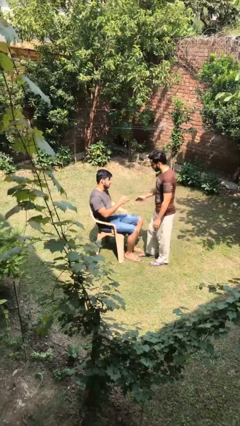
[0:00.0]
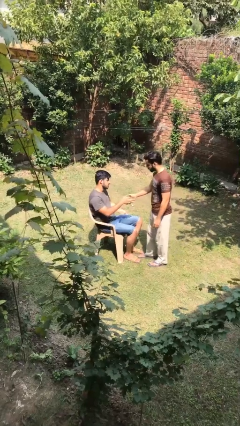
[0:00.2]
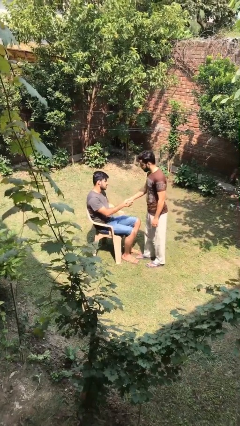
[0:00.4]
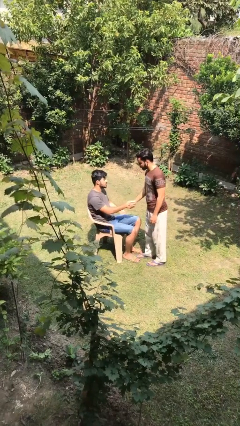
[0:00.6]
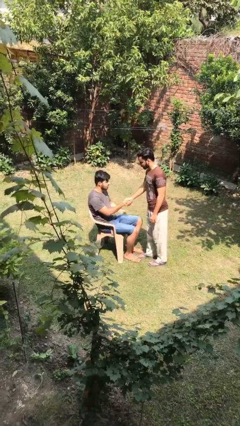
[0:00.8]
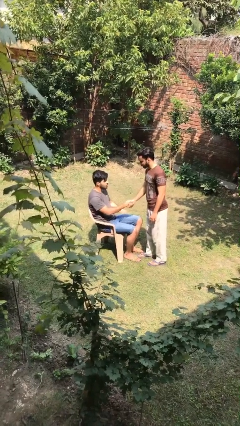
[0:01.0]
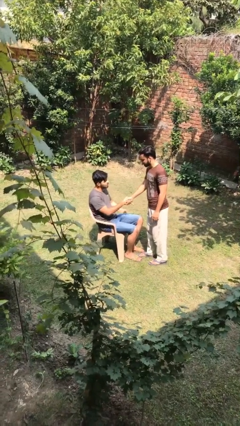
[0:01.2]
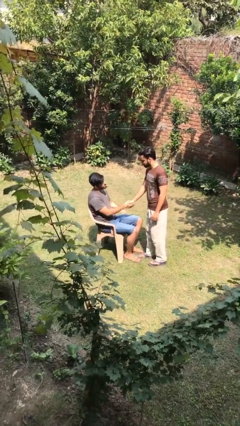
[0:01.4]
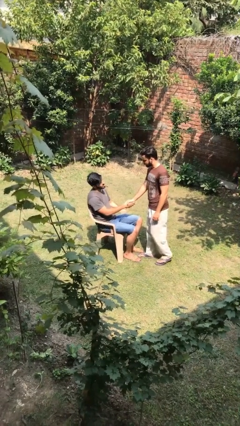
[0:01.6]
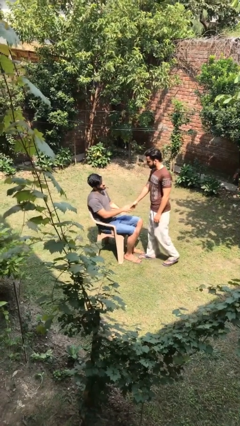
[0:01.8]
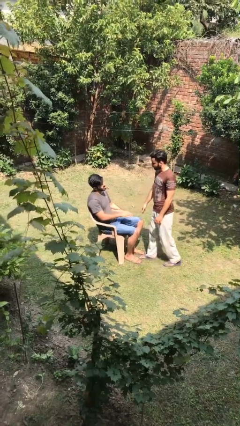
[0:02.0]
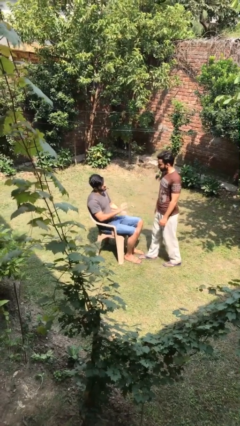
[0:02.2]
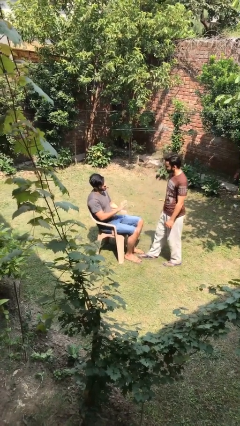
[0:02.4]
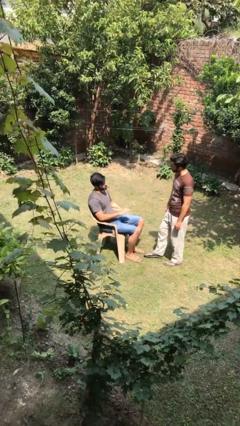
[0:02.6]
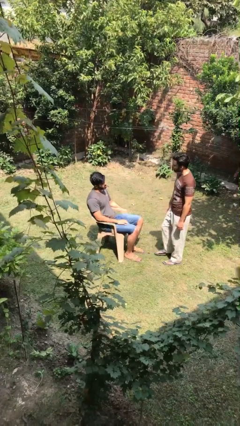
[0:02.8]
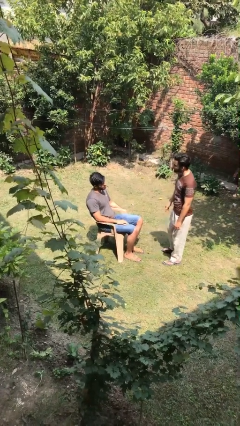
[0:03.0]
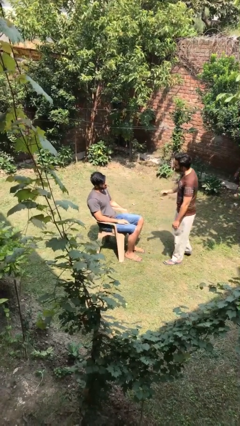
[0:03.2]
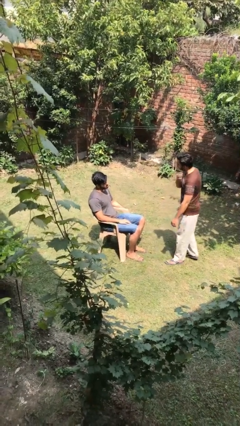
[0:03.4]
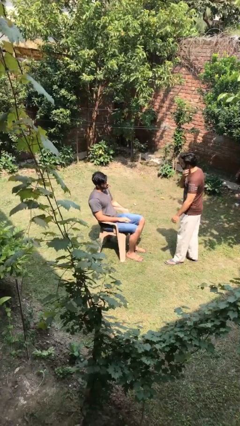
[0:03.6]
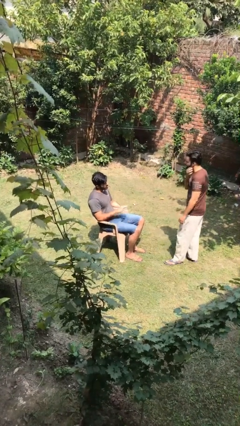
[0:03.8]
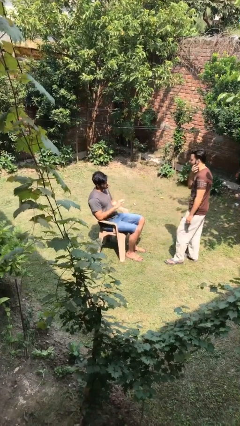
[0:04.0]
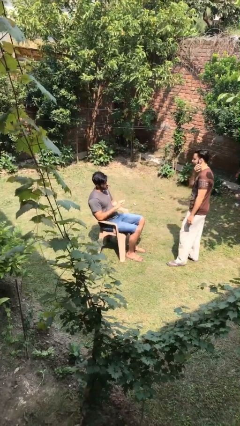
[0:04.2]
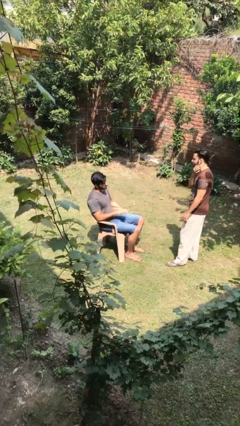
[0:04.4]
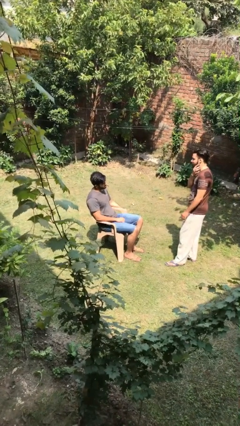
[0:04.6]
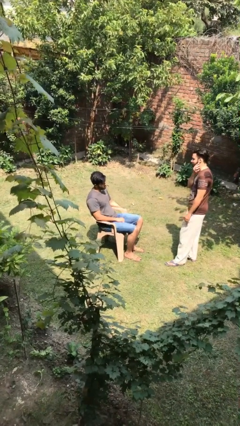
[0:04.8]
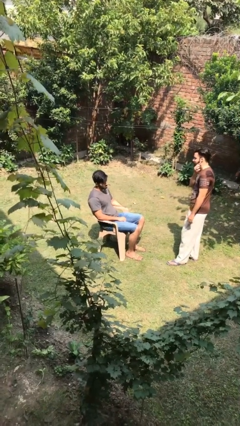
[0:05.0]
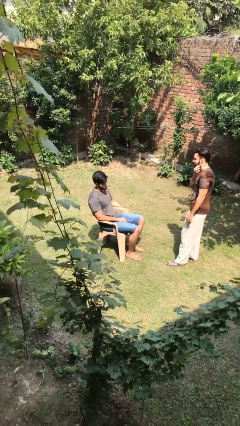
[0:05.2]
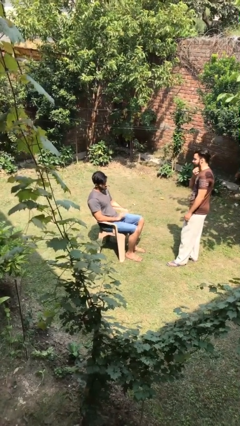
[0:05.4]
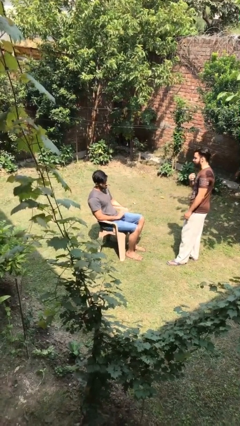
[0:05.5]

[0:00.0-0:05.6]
person shakes hand

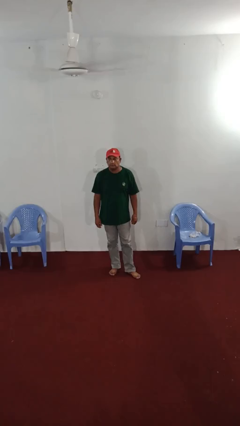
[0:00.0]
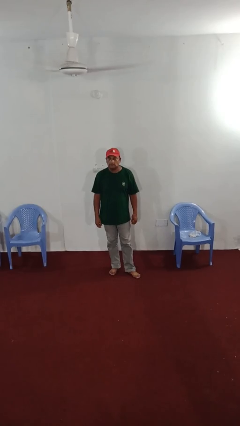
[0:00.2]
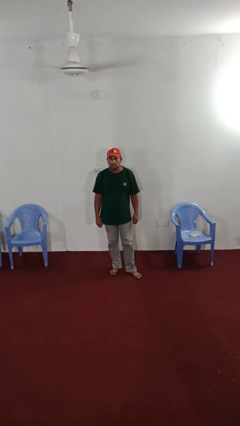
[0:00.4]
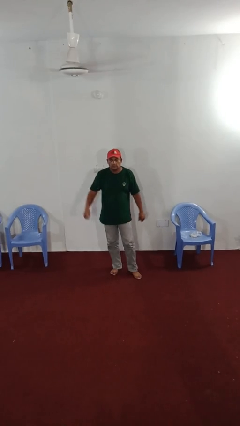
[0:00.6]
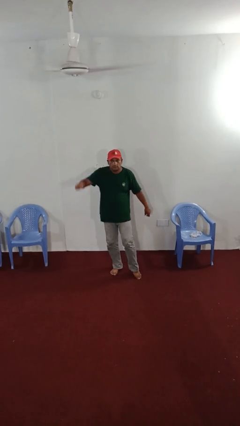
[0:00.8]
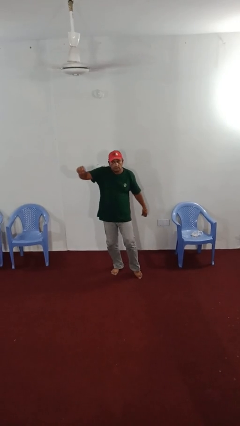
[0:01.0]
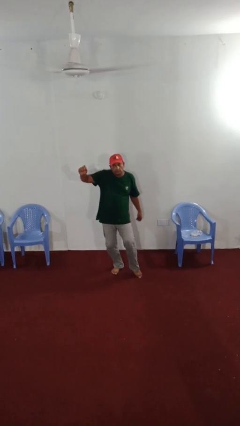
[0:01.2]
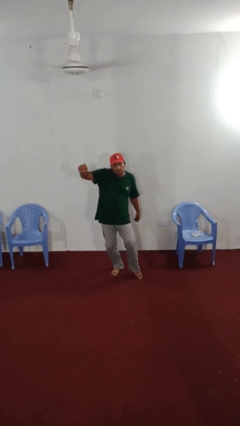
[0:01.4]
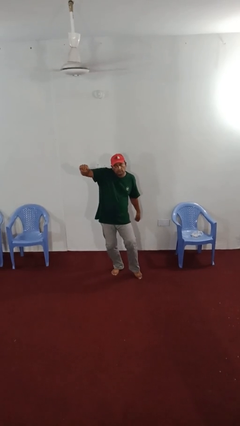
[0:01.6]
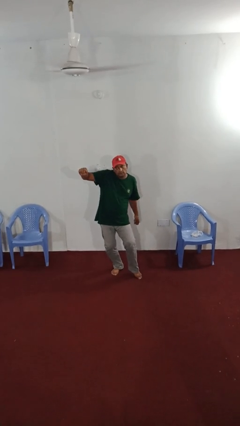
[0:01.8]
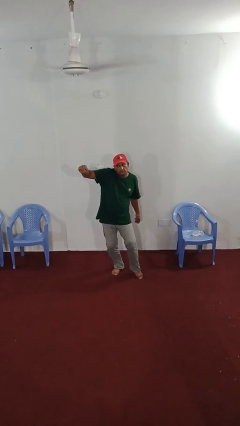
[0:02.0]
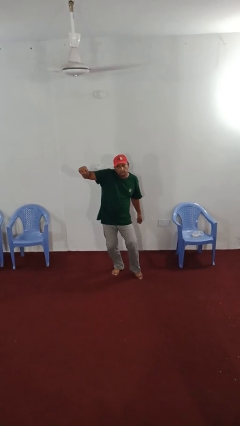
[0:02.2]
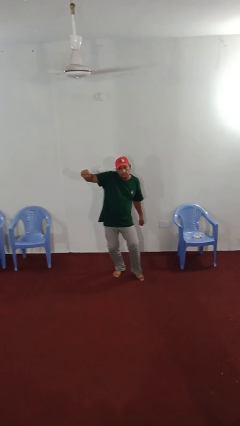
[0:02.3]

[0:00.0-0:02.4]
person dances in place

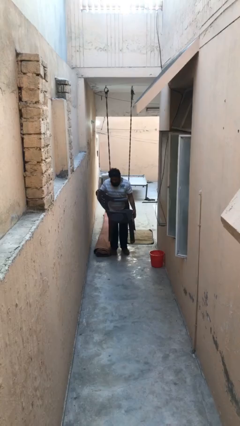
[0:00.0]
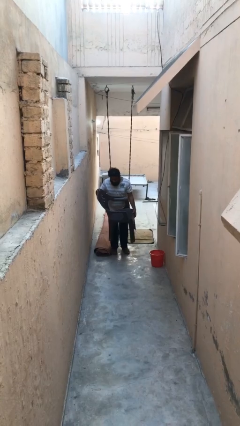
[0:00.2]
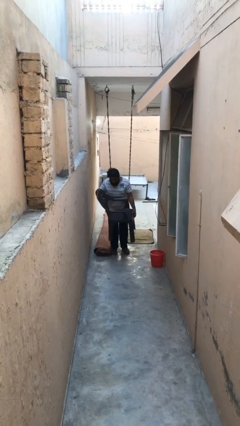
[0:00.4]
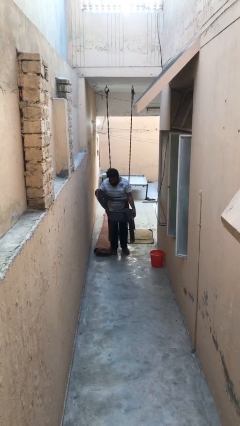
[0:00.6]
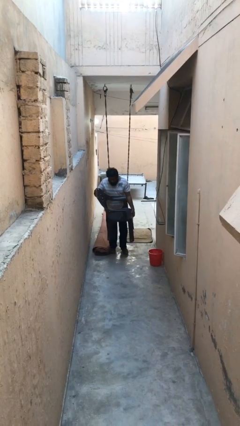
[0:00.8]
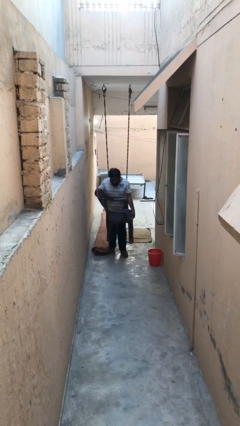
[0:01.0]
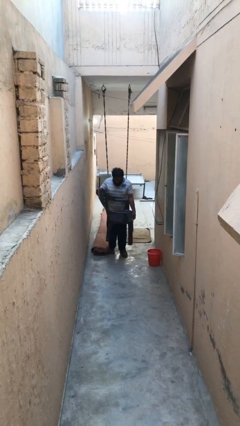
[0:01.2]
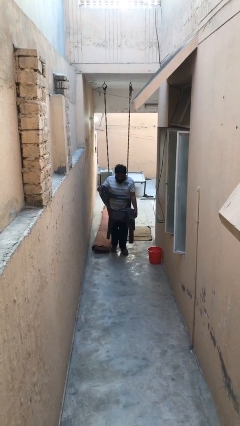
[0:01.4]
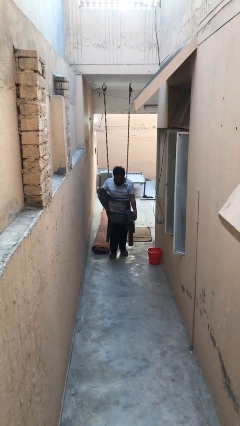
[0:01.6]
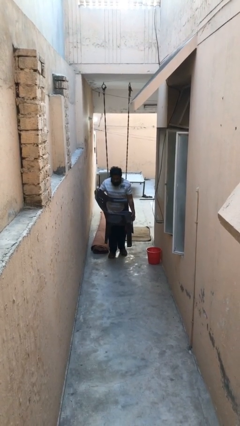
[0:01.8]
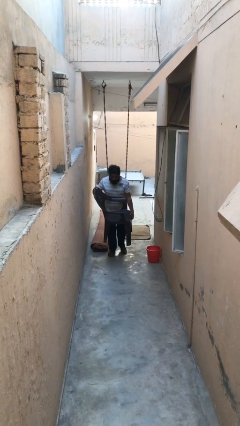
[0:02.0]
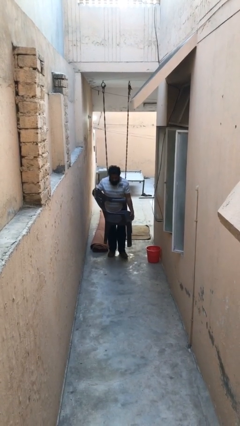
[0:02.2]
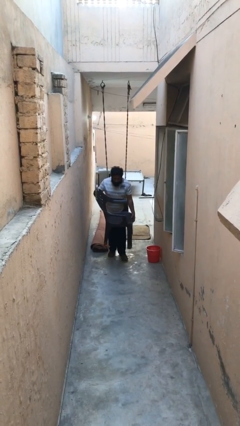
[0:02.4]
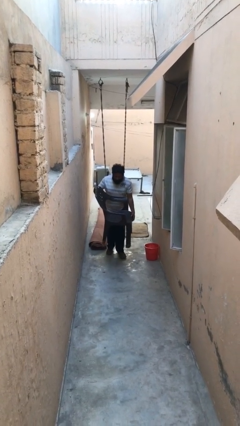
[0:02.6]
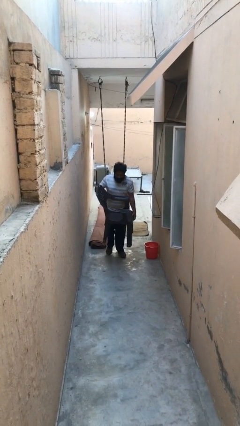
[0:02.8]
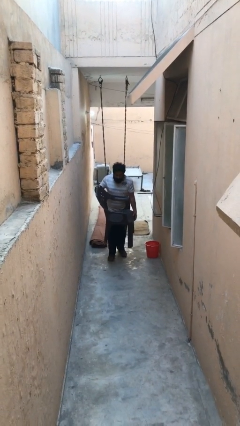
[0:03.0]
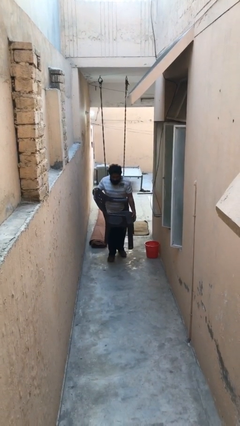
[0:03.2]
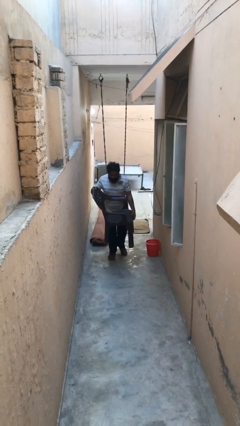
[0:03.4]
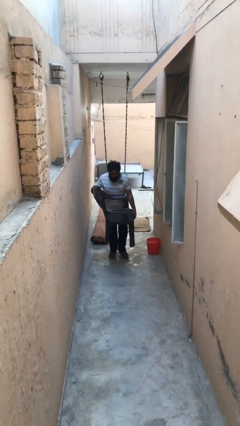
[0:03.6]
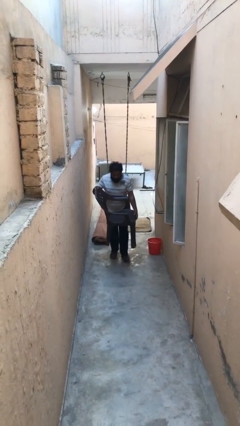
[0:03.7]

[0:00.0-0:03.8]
person carries heavy object

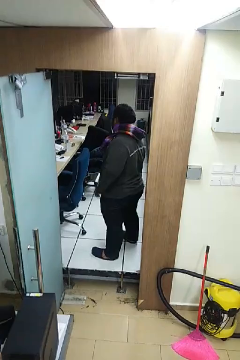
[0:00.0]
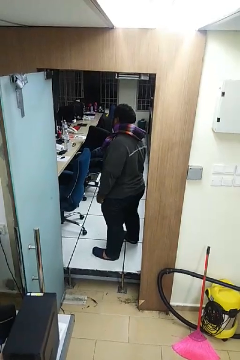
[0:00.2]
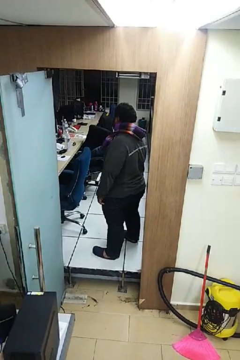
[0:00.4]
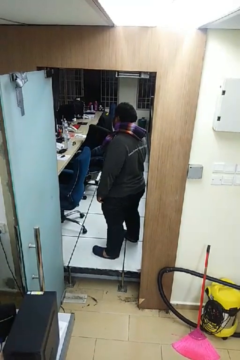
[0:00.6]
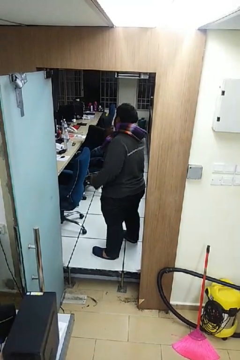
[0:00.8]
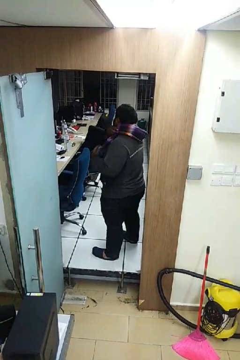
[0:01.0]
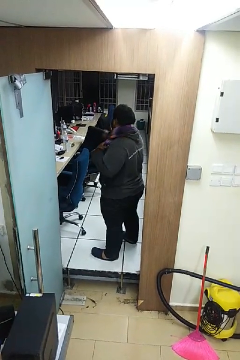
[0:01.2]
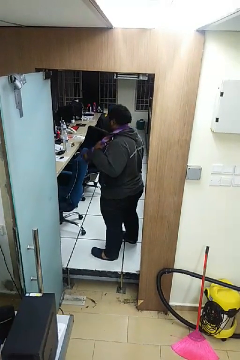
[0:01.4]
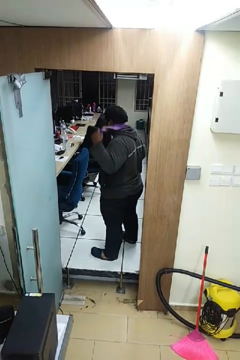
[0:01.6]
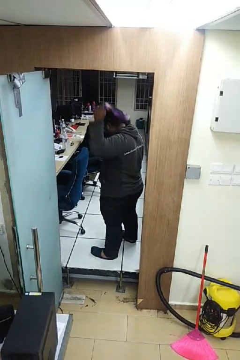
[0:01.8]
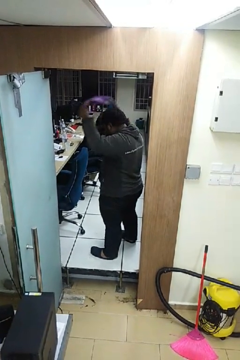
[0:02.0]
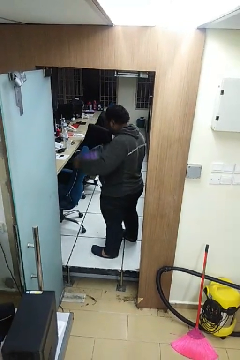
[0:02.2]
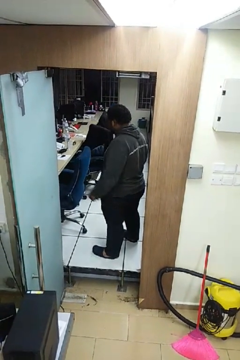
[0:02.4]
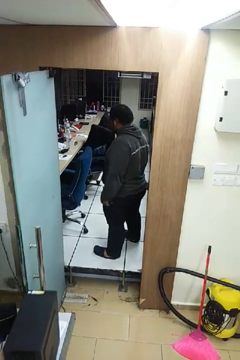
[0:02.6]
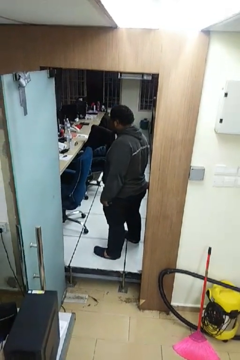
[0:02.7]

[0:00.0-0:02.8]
person takes off scarf

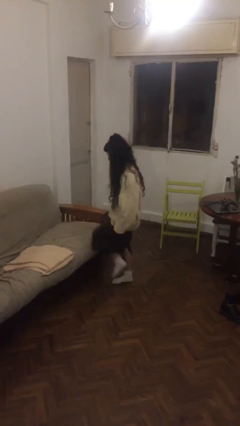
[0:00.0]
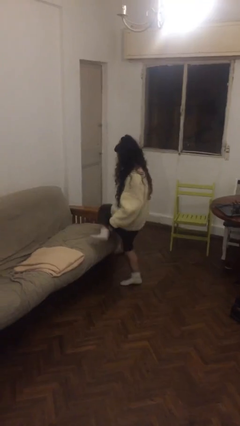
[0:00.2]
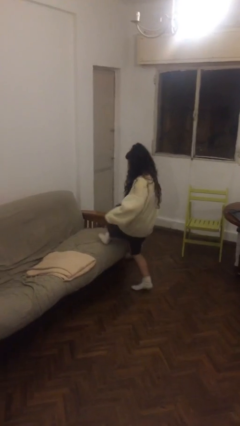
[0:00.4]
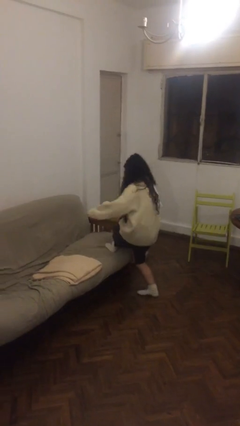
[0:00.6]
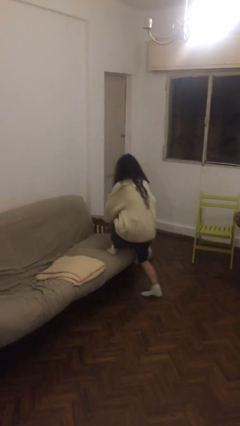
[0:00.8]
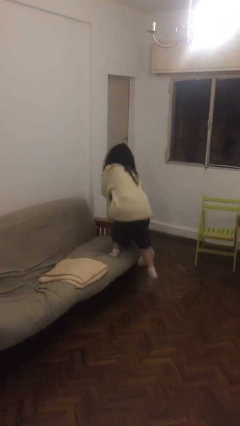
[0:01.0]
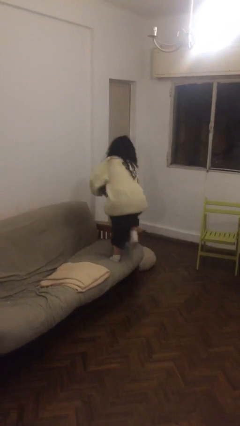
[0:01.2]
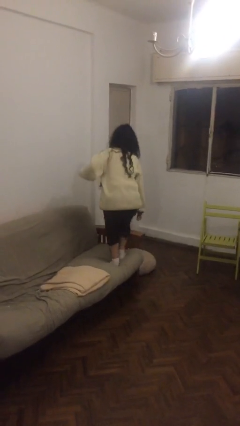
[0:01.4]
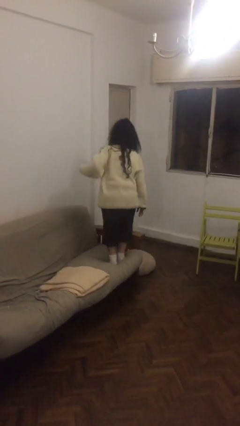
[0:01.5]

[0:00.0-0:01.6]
person climbs on couch

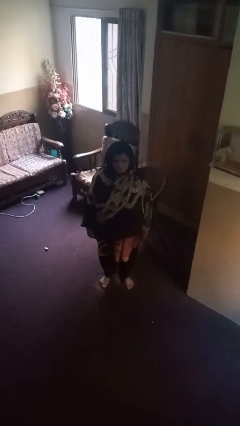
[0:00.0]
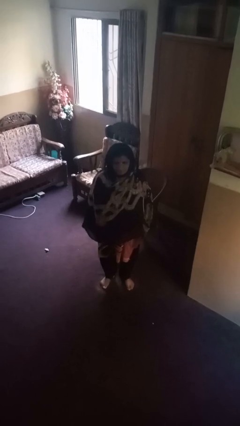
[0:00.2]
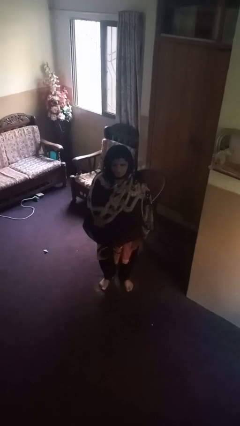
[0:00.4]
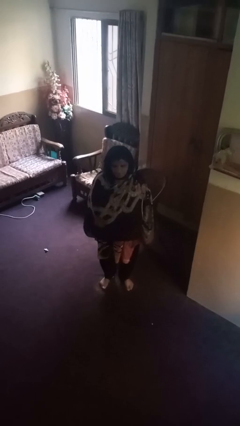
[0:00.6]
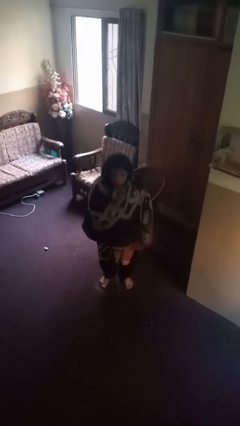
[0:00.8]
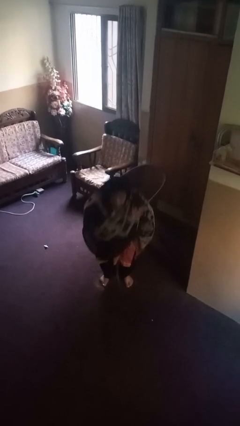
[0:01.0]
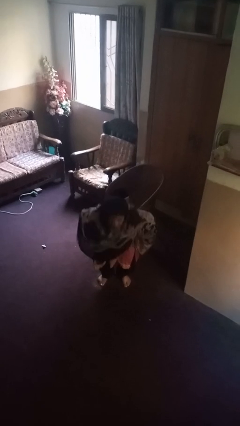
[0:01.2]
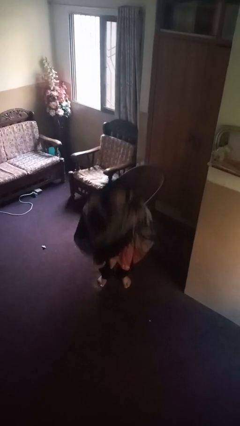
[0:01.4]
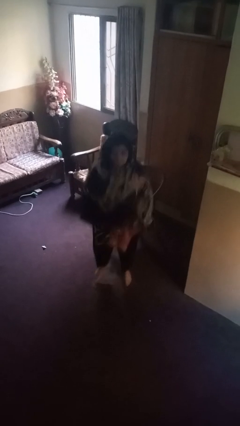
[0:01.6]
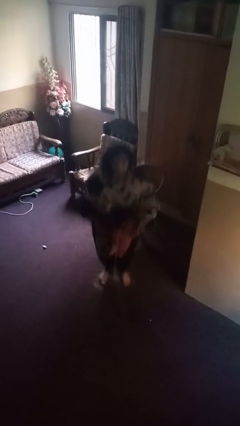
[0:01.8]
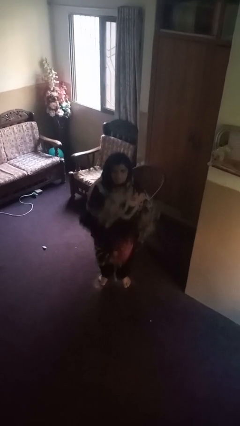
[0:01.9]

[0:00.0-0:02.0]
person jumps
